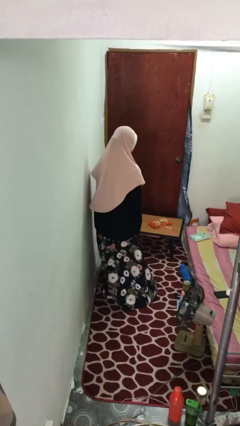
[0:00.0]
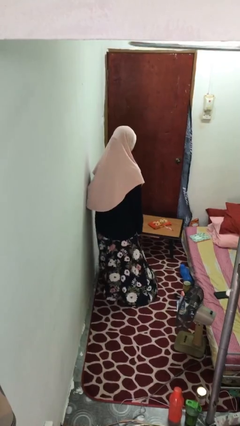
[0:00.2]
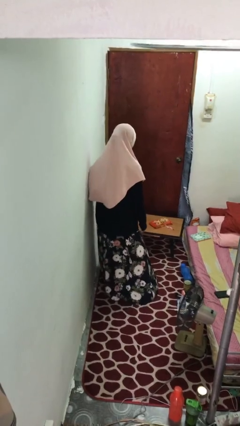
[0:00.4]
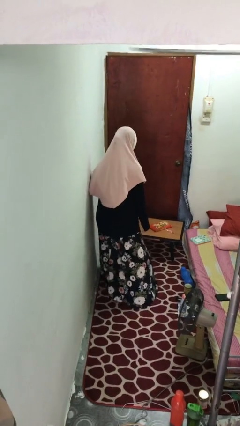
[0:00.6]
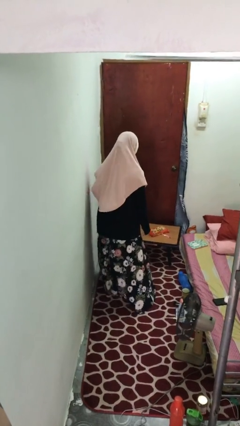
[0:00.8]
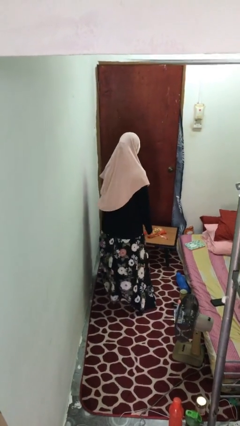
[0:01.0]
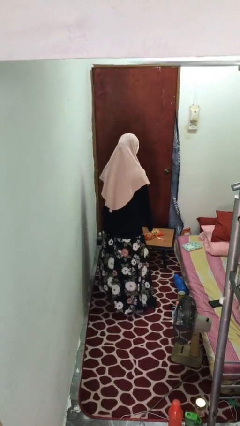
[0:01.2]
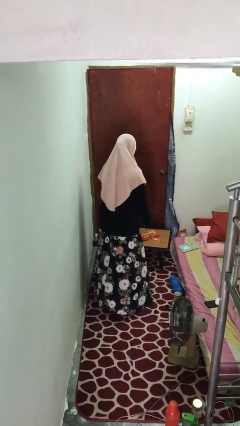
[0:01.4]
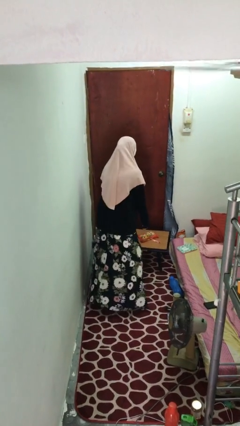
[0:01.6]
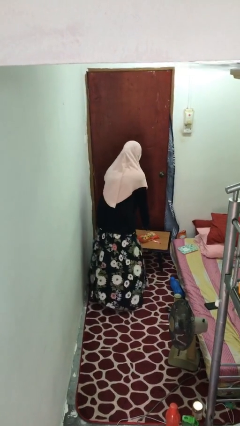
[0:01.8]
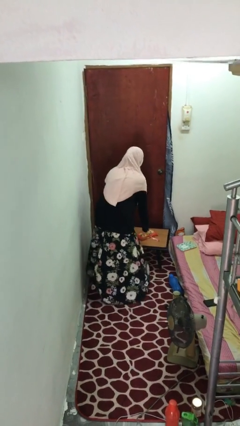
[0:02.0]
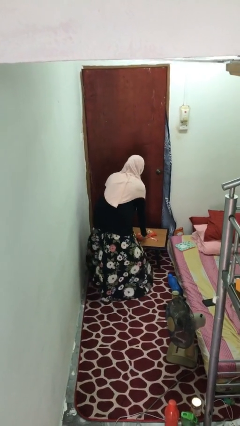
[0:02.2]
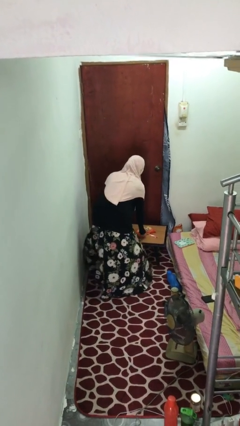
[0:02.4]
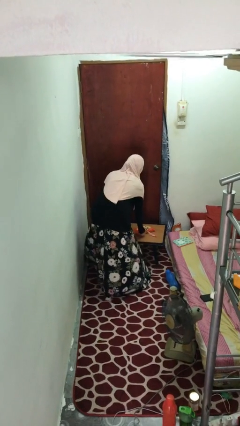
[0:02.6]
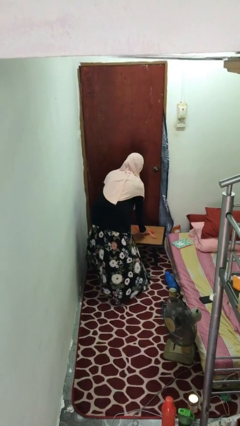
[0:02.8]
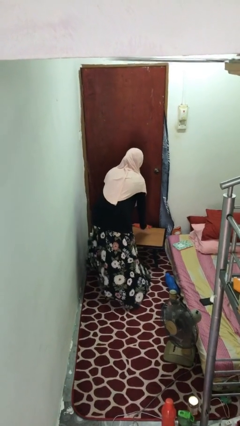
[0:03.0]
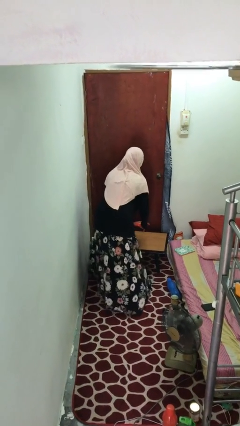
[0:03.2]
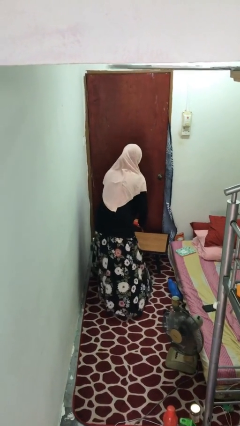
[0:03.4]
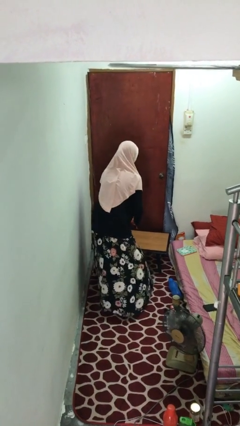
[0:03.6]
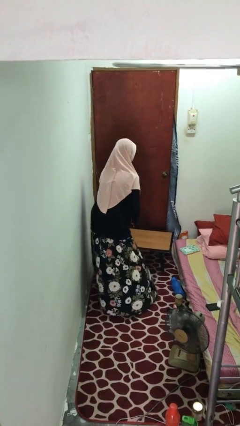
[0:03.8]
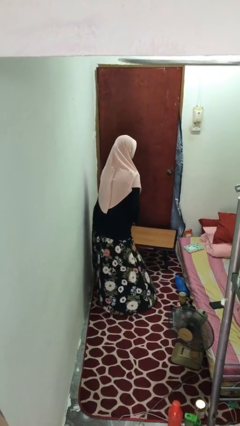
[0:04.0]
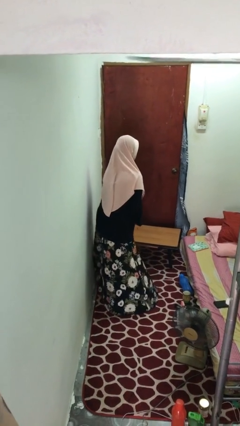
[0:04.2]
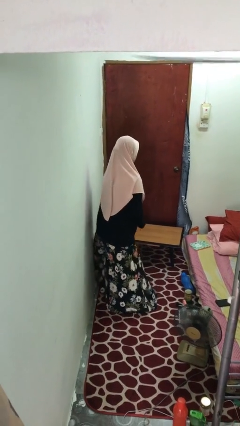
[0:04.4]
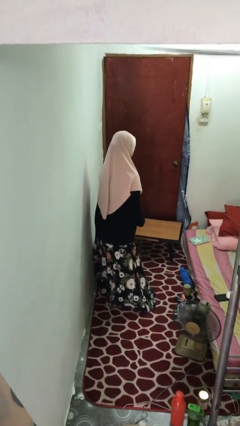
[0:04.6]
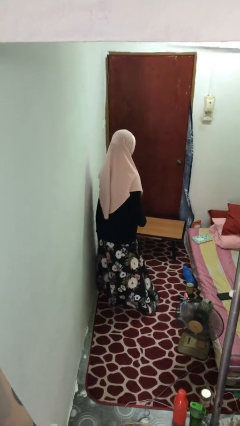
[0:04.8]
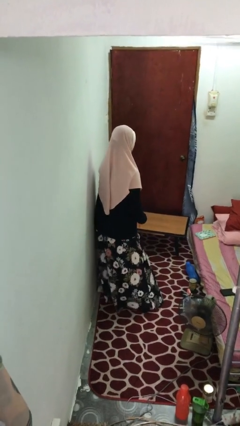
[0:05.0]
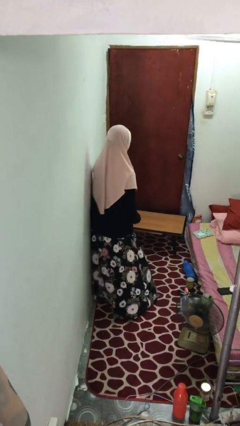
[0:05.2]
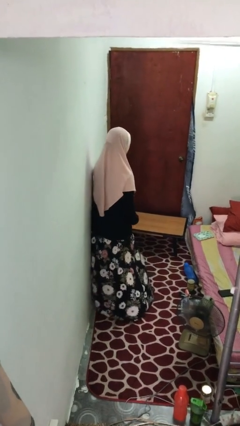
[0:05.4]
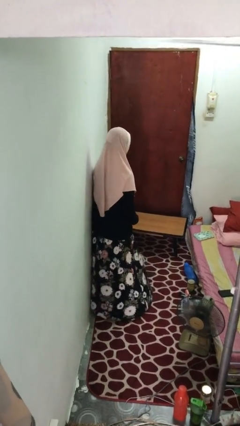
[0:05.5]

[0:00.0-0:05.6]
person picks up object from table

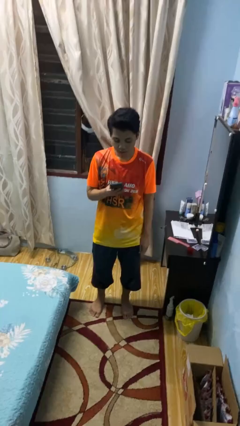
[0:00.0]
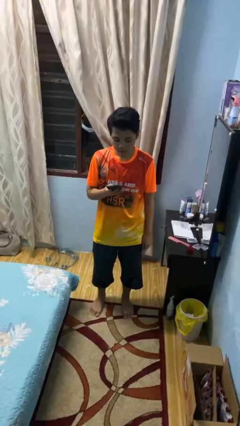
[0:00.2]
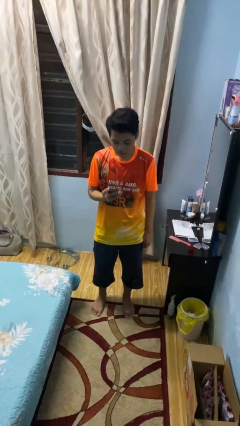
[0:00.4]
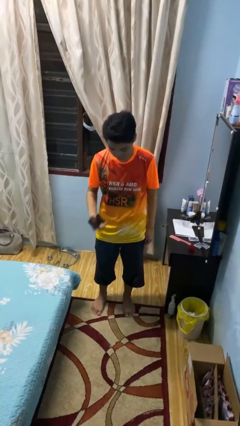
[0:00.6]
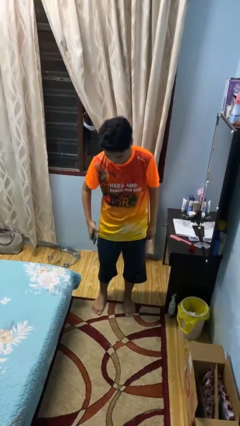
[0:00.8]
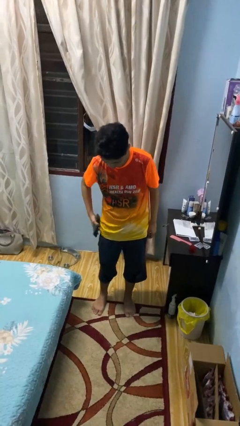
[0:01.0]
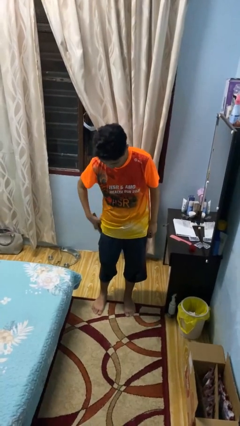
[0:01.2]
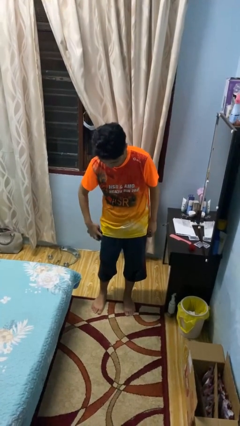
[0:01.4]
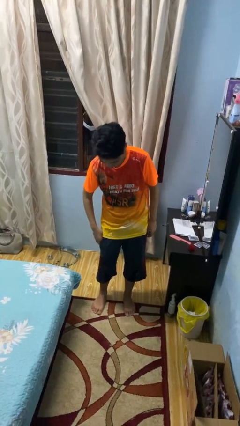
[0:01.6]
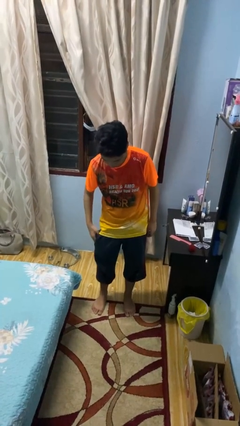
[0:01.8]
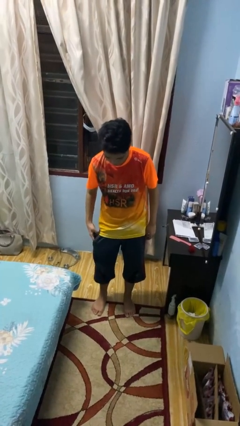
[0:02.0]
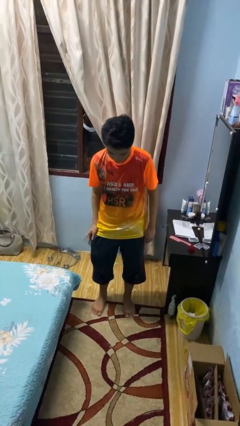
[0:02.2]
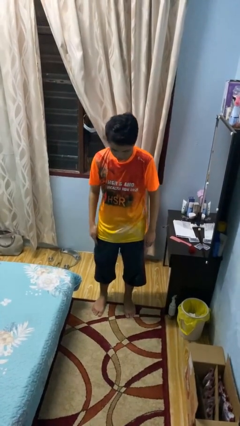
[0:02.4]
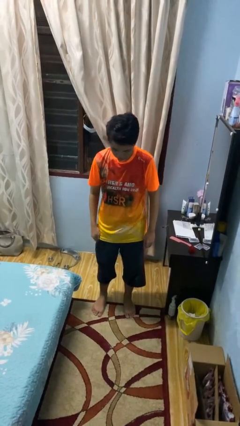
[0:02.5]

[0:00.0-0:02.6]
person puts phone into pocket

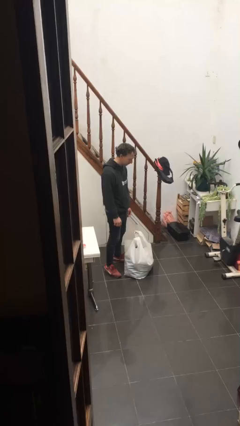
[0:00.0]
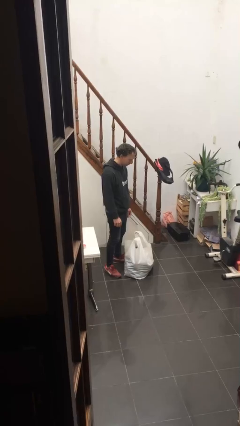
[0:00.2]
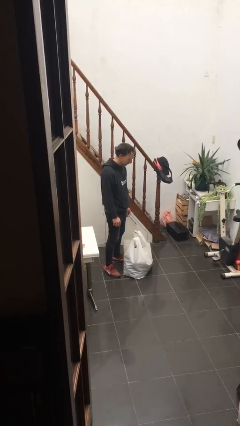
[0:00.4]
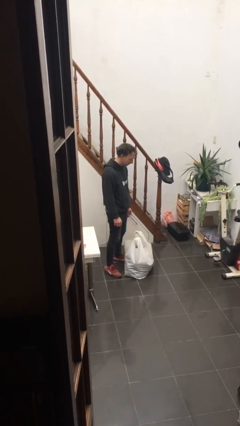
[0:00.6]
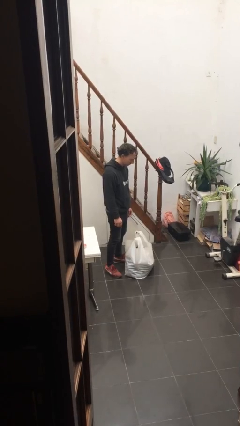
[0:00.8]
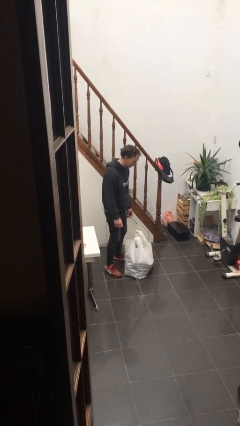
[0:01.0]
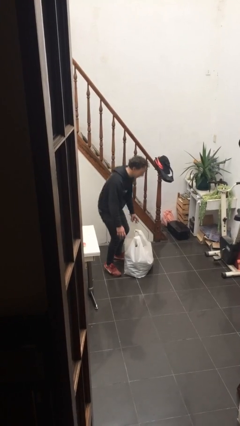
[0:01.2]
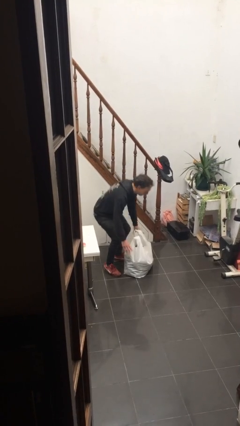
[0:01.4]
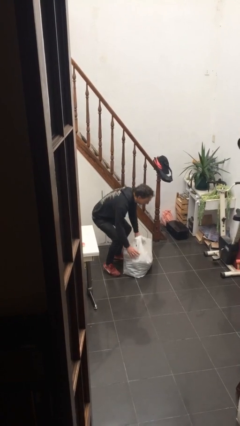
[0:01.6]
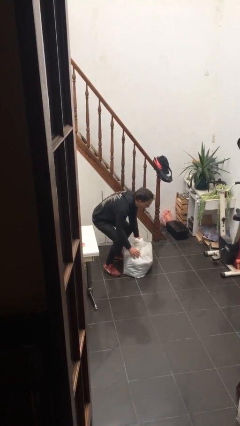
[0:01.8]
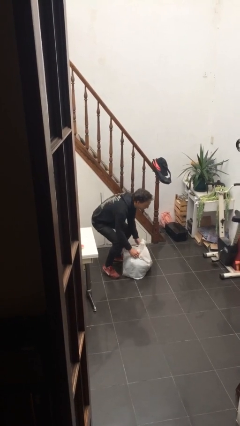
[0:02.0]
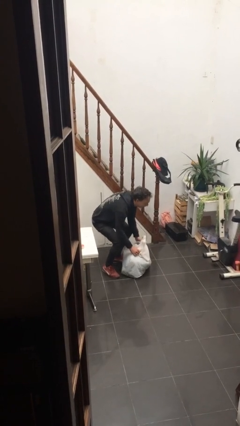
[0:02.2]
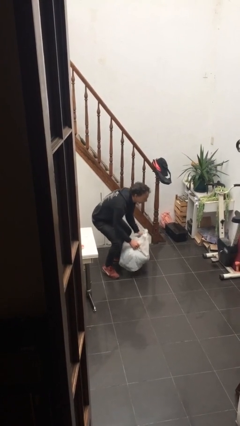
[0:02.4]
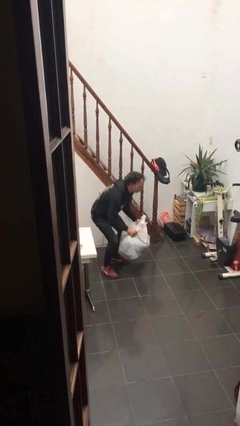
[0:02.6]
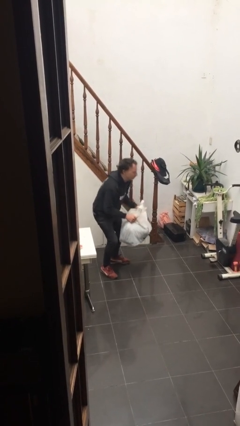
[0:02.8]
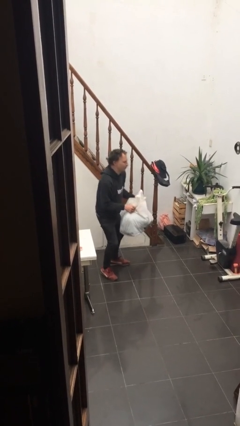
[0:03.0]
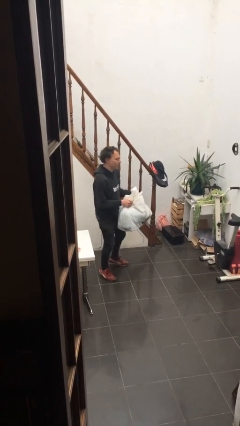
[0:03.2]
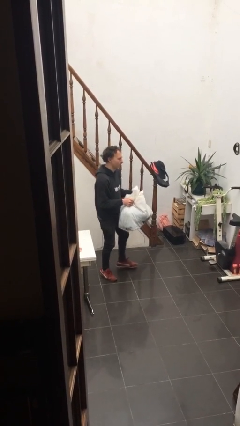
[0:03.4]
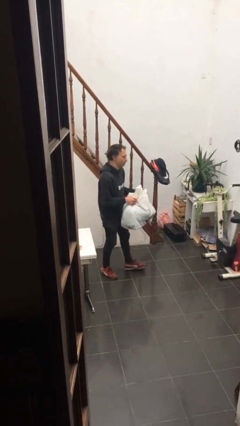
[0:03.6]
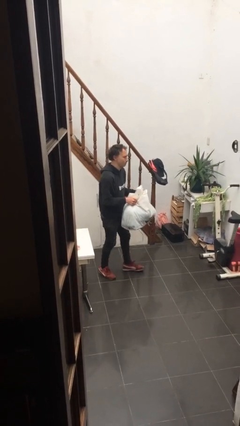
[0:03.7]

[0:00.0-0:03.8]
person picks up object from floor

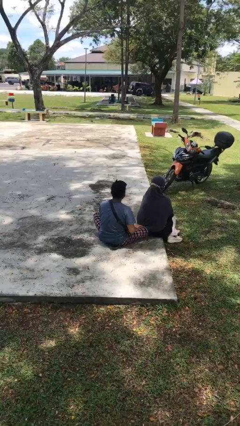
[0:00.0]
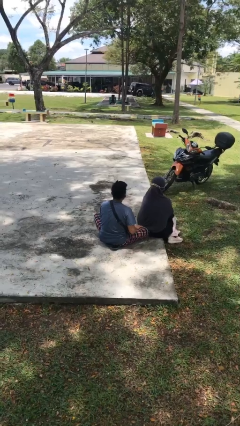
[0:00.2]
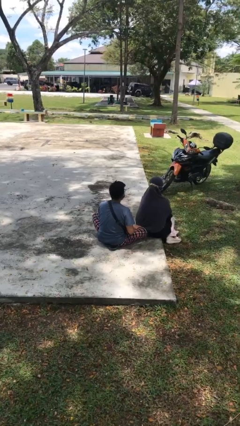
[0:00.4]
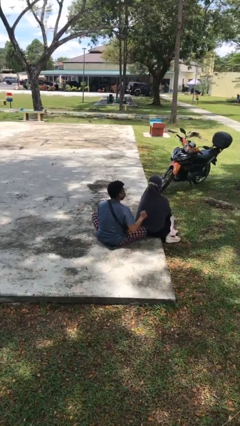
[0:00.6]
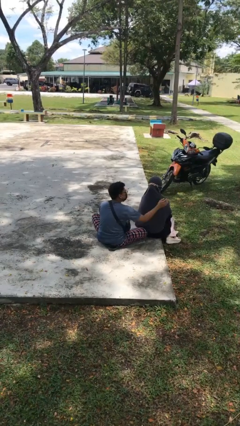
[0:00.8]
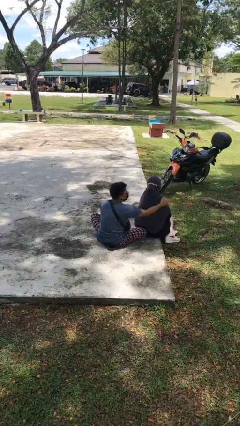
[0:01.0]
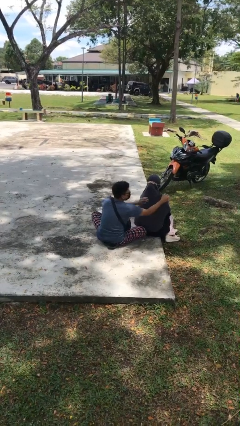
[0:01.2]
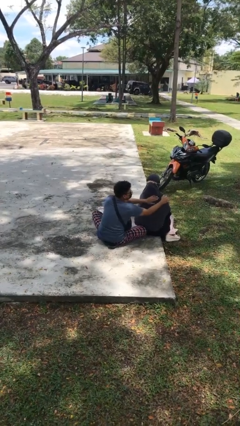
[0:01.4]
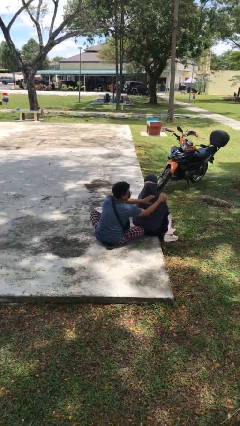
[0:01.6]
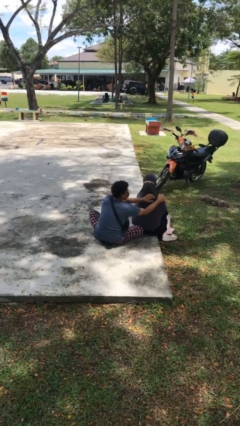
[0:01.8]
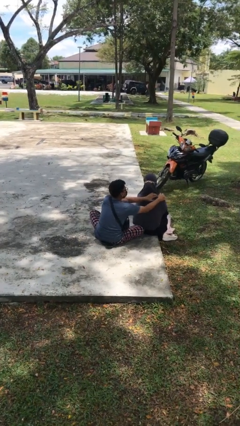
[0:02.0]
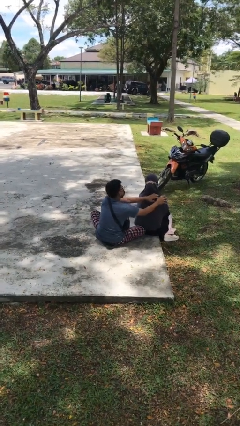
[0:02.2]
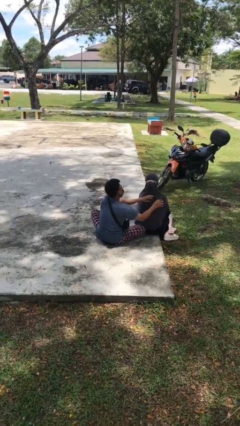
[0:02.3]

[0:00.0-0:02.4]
person pounds shoulders of person

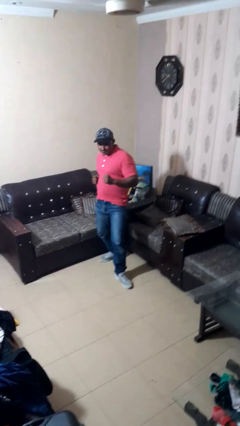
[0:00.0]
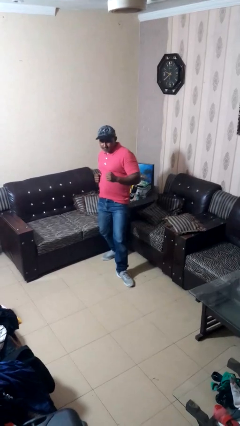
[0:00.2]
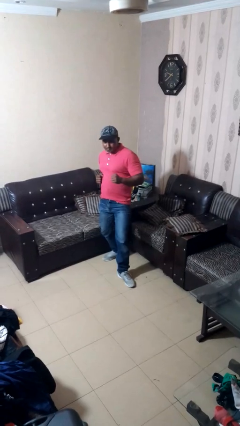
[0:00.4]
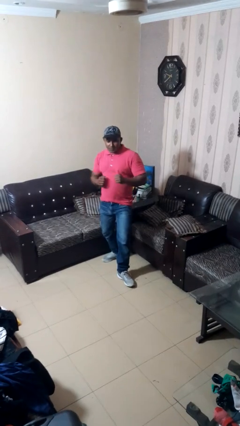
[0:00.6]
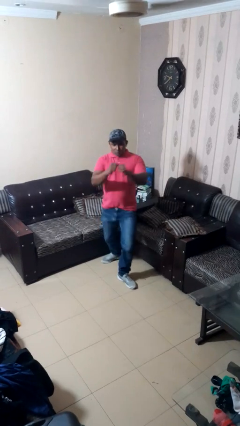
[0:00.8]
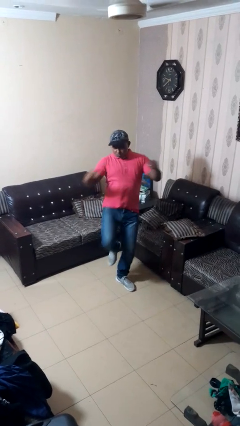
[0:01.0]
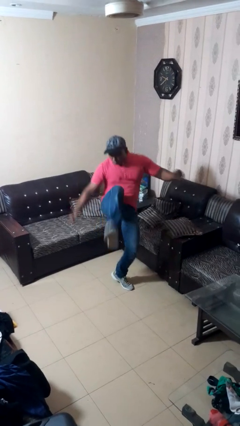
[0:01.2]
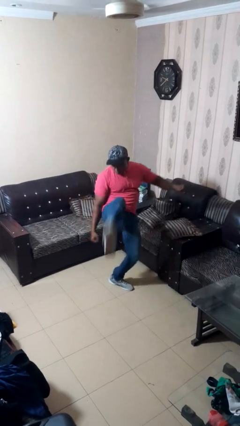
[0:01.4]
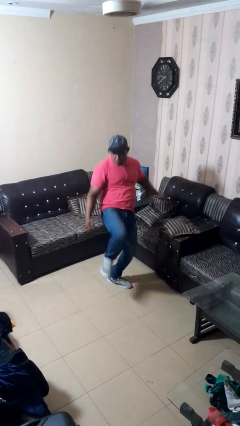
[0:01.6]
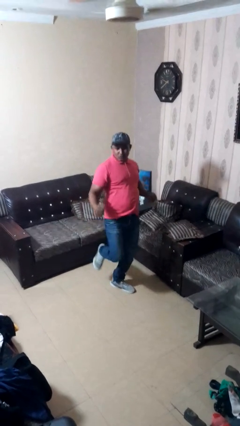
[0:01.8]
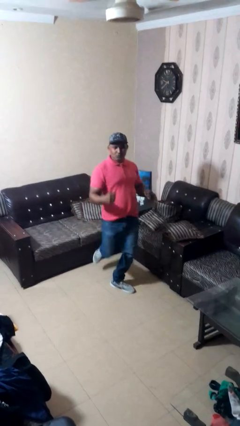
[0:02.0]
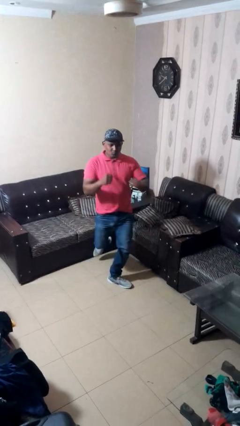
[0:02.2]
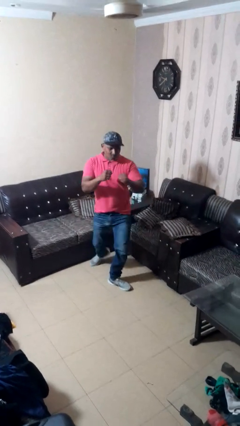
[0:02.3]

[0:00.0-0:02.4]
person karate kicks

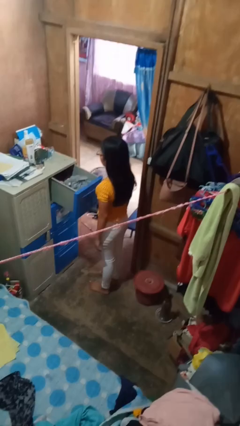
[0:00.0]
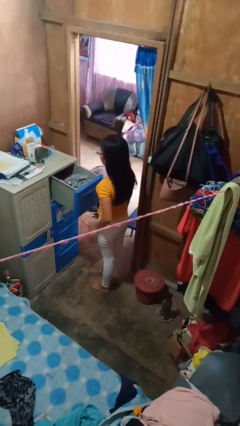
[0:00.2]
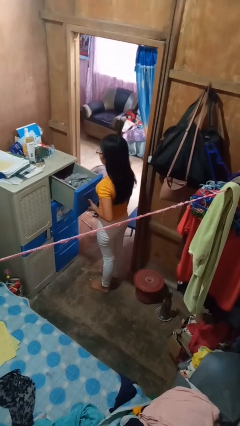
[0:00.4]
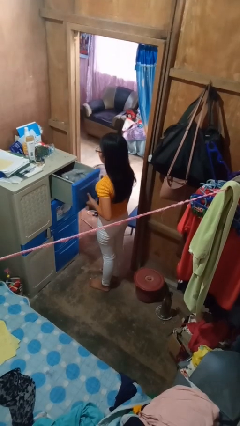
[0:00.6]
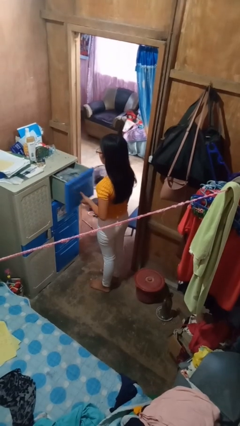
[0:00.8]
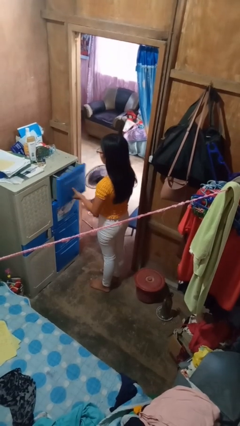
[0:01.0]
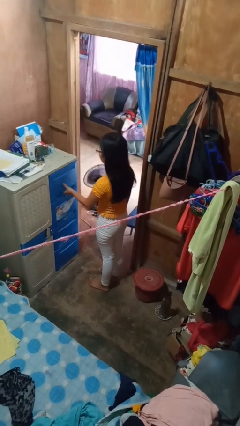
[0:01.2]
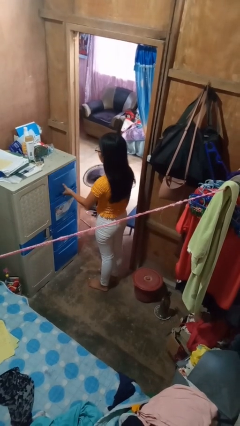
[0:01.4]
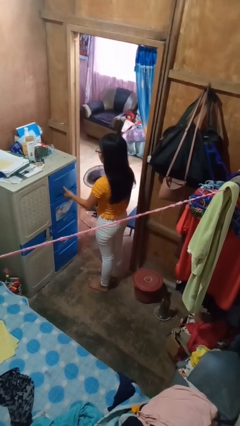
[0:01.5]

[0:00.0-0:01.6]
person closes dresser drawer
